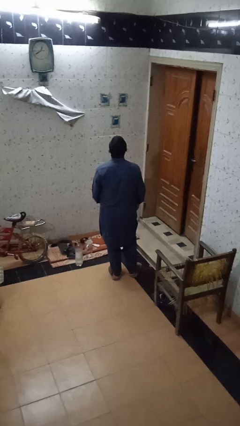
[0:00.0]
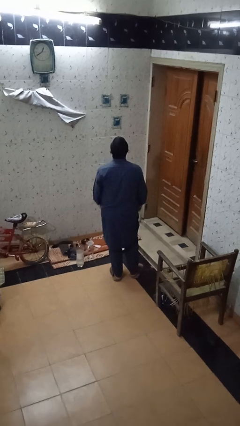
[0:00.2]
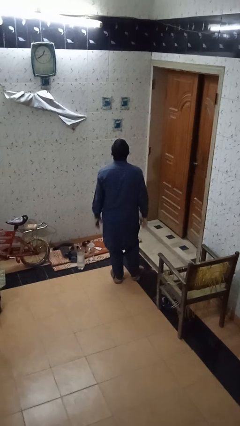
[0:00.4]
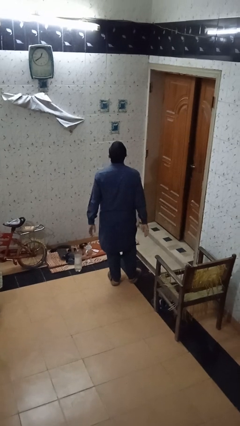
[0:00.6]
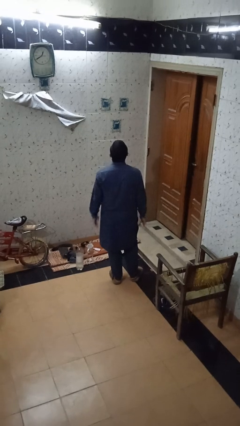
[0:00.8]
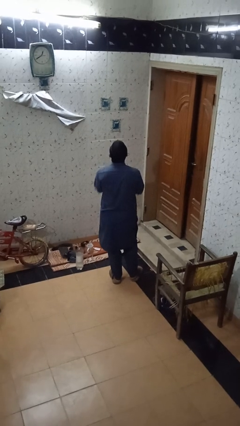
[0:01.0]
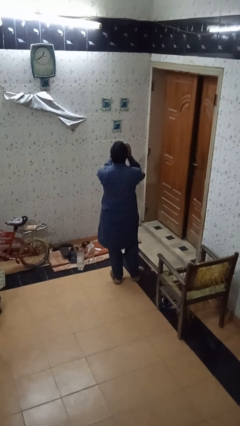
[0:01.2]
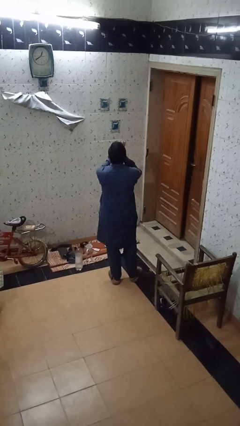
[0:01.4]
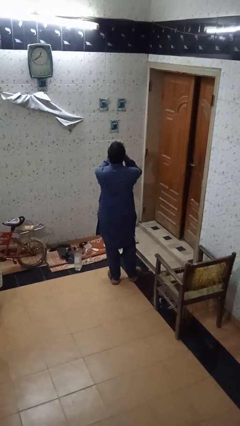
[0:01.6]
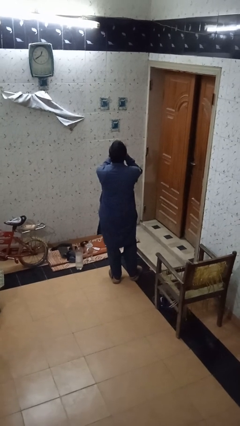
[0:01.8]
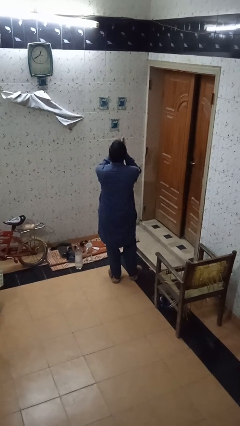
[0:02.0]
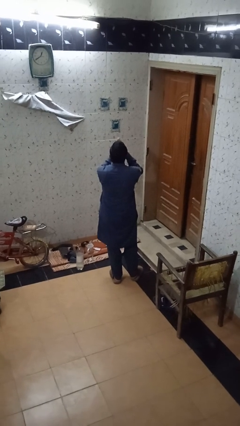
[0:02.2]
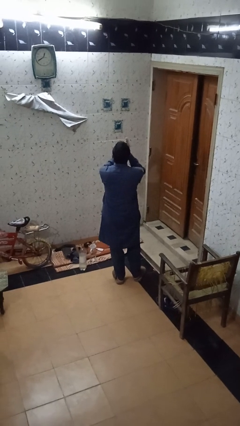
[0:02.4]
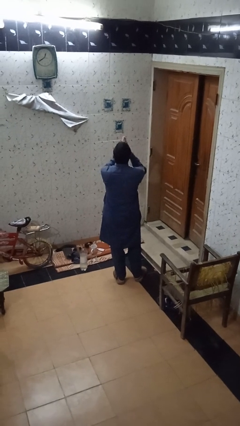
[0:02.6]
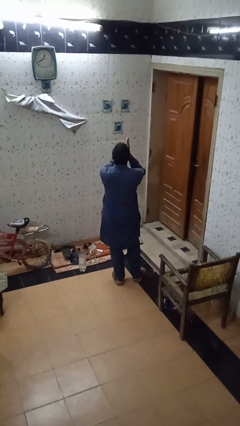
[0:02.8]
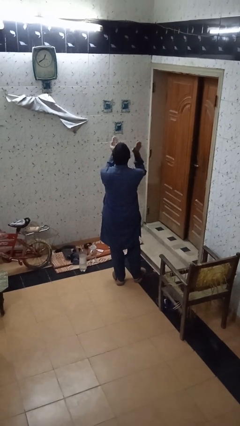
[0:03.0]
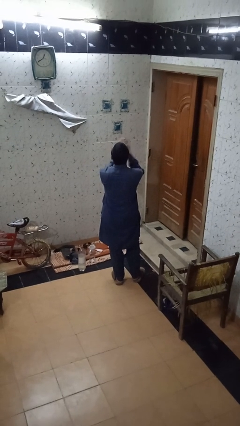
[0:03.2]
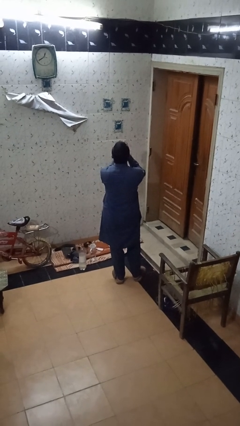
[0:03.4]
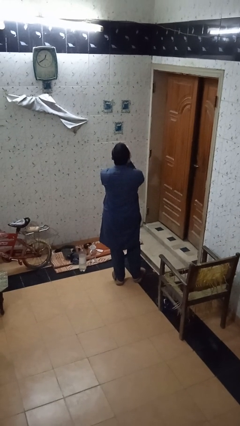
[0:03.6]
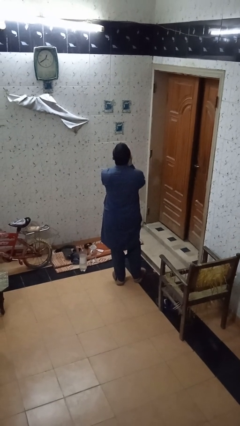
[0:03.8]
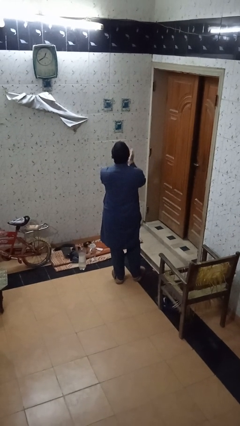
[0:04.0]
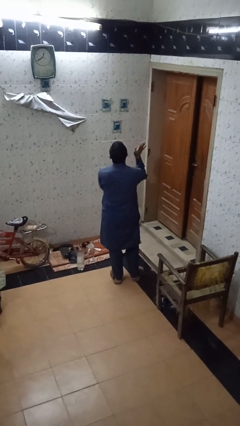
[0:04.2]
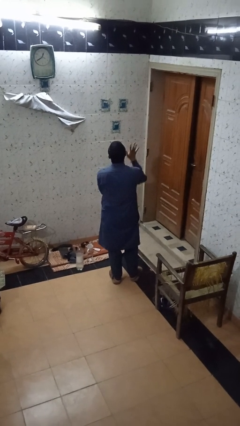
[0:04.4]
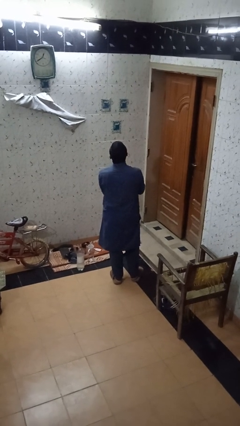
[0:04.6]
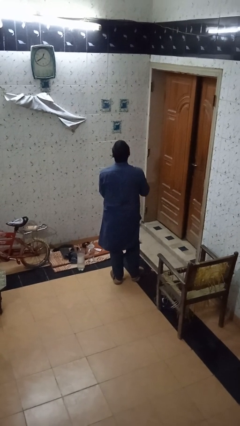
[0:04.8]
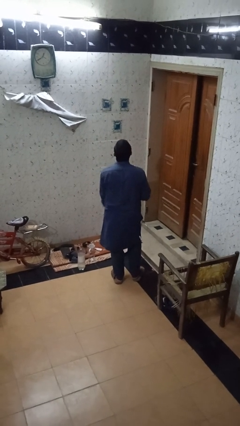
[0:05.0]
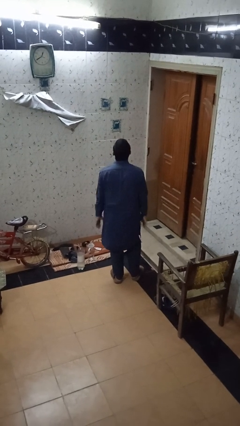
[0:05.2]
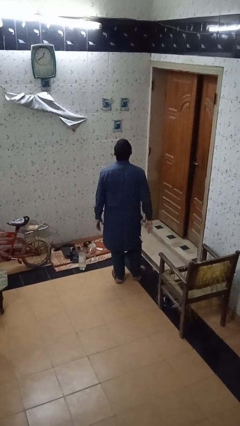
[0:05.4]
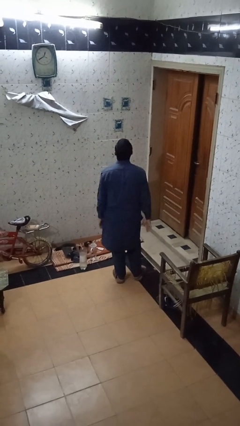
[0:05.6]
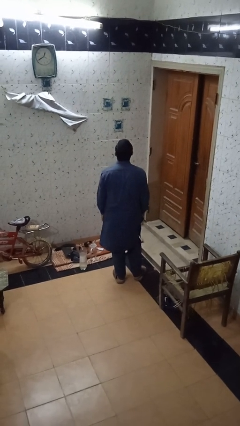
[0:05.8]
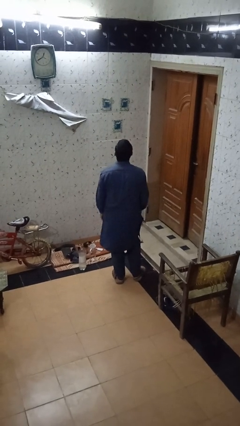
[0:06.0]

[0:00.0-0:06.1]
person claps hands

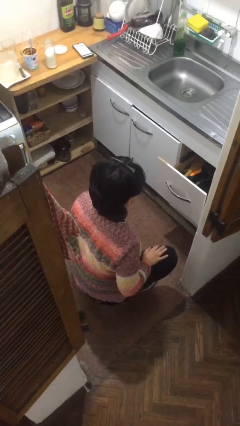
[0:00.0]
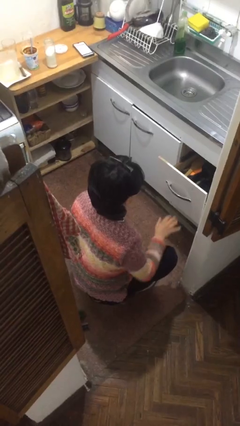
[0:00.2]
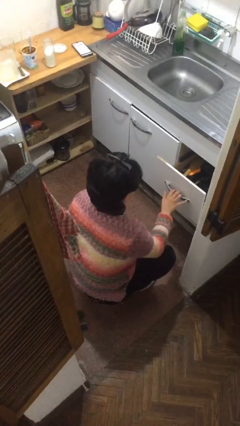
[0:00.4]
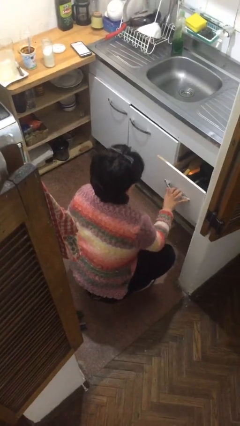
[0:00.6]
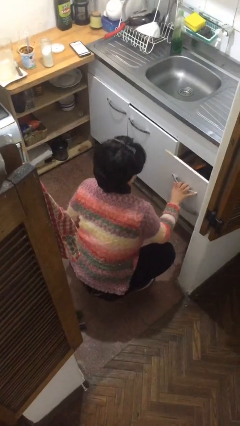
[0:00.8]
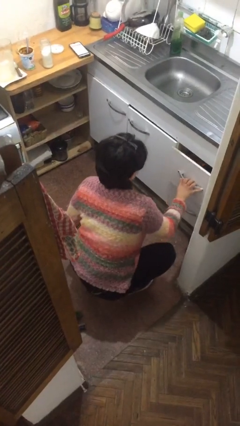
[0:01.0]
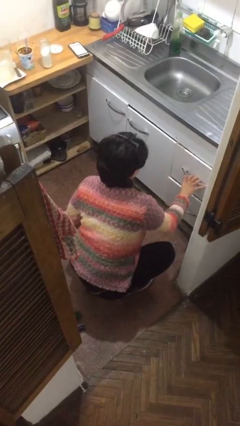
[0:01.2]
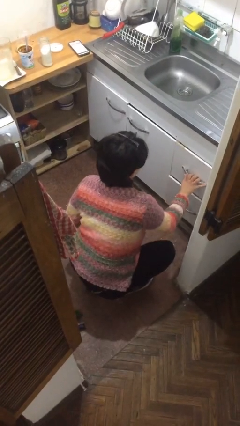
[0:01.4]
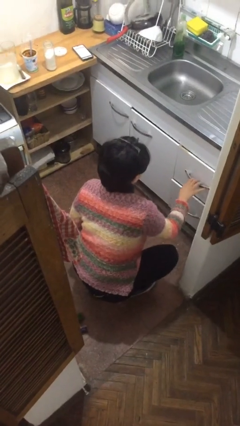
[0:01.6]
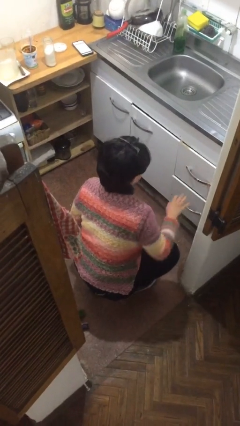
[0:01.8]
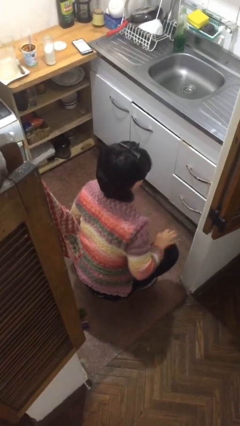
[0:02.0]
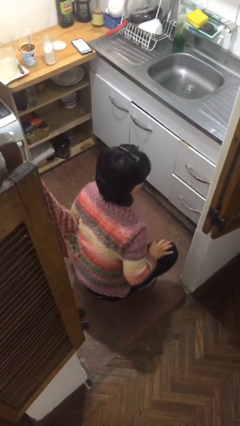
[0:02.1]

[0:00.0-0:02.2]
person closes kitchen drawer

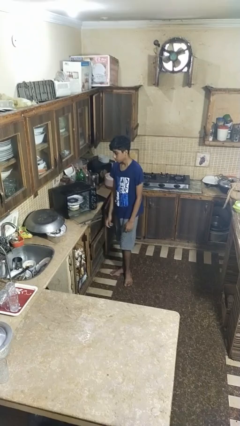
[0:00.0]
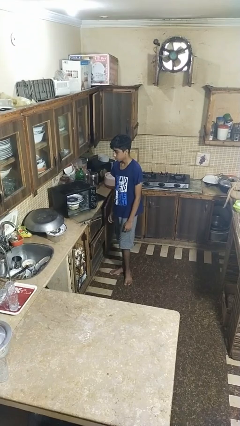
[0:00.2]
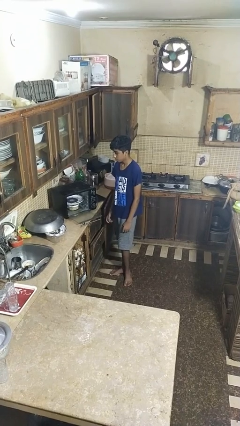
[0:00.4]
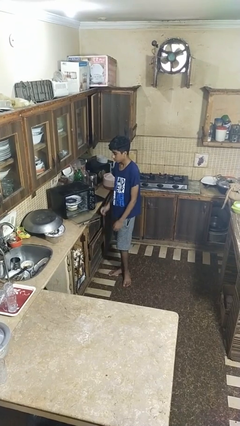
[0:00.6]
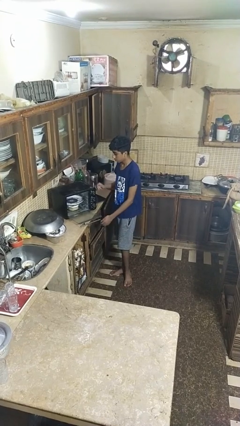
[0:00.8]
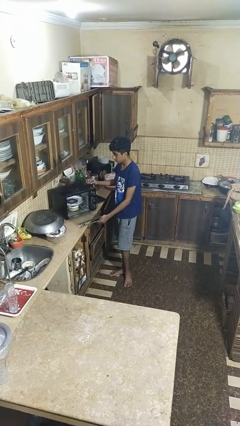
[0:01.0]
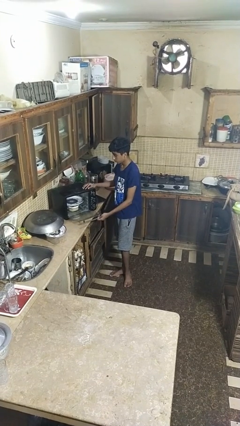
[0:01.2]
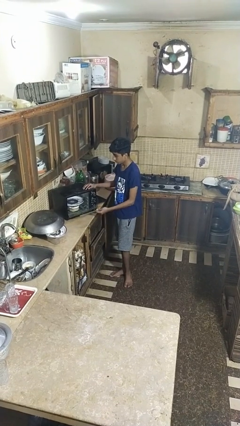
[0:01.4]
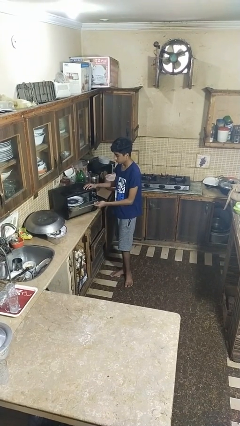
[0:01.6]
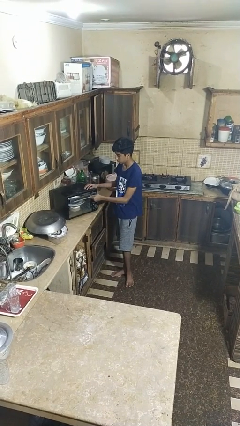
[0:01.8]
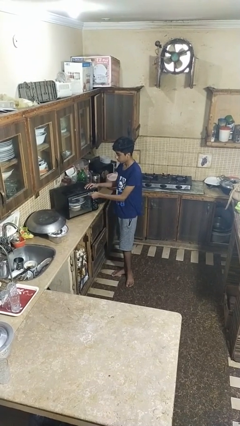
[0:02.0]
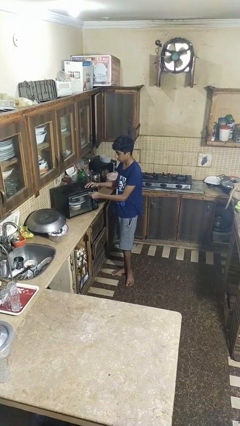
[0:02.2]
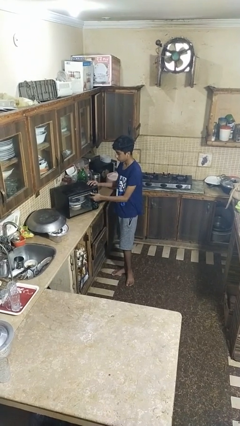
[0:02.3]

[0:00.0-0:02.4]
person closes dishwasher

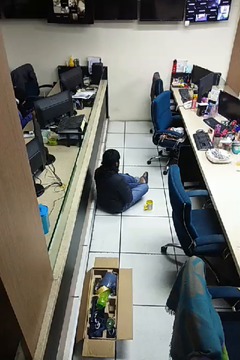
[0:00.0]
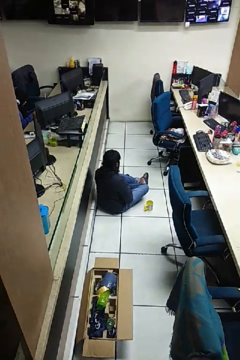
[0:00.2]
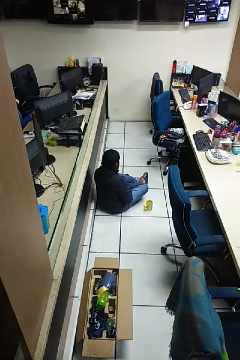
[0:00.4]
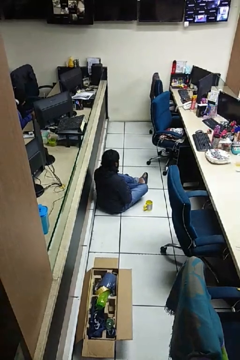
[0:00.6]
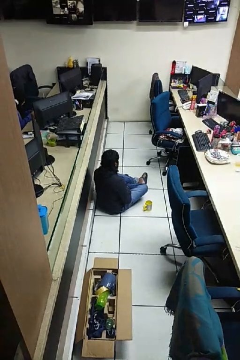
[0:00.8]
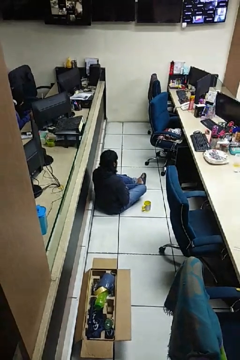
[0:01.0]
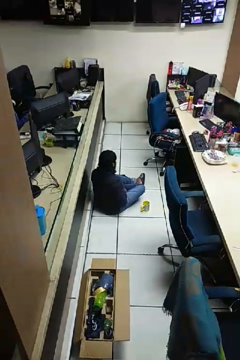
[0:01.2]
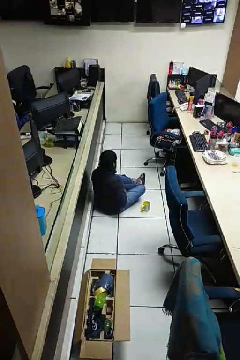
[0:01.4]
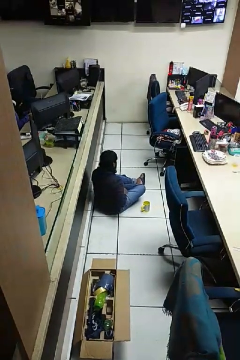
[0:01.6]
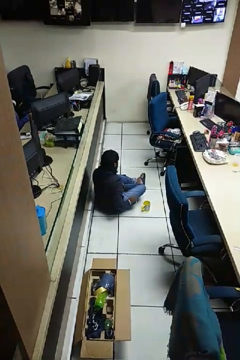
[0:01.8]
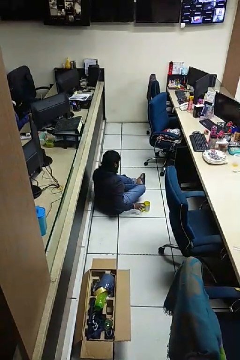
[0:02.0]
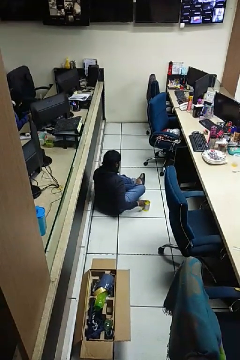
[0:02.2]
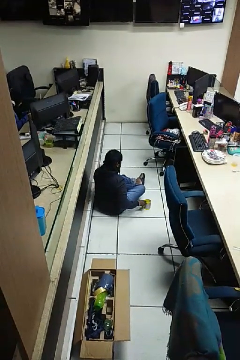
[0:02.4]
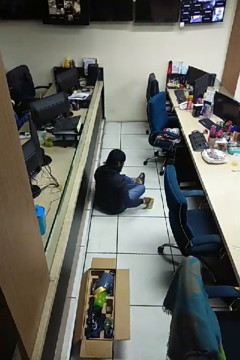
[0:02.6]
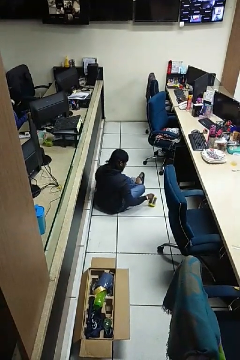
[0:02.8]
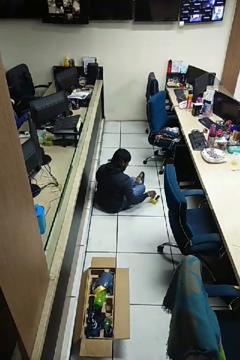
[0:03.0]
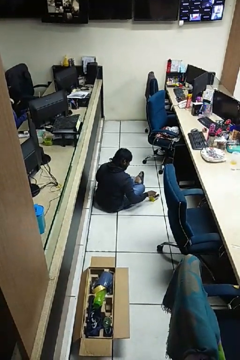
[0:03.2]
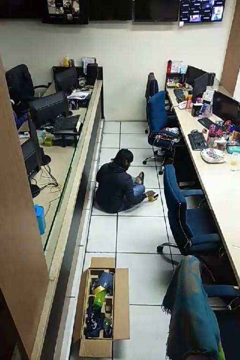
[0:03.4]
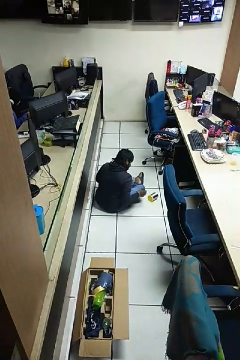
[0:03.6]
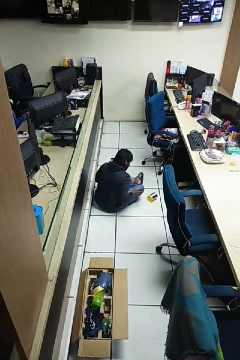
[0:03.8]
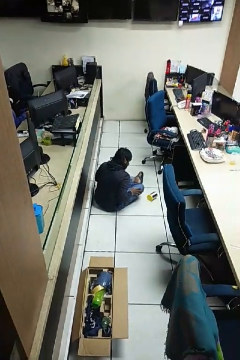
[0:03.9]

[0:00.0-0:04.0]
person spills on floor

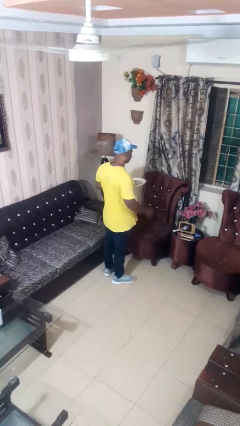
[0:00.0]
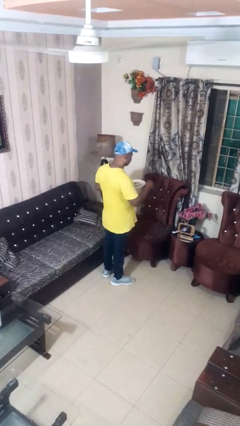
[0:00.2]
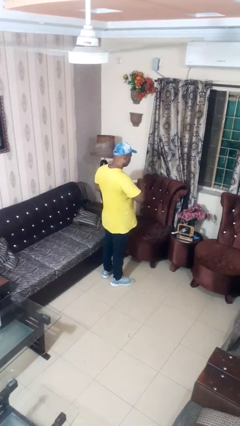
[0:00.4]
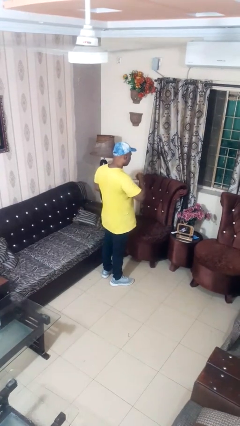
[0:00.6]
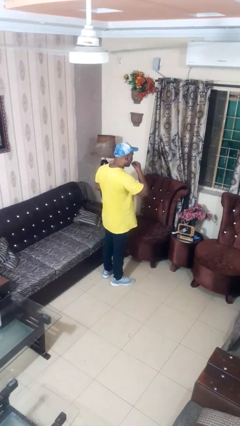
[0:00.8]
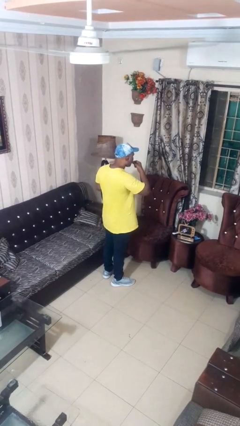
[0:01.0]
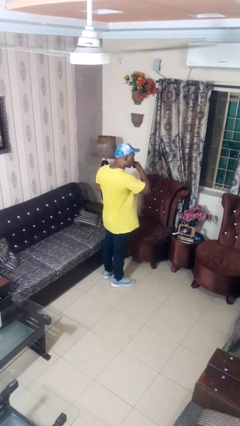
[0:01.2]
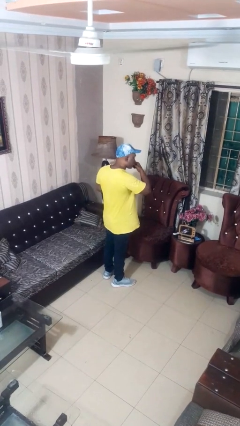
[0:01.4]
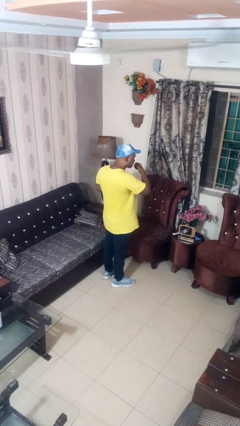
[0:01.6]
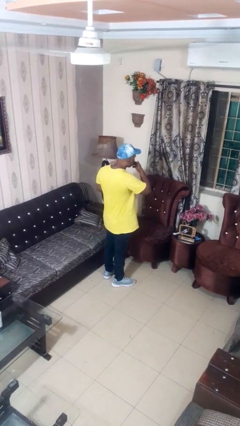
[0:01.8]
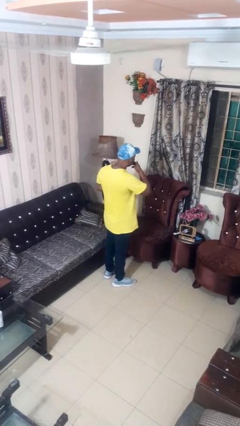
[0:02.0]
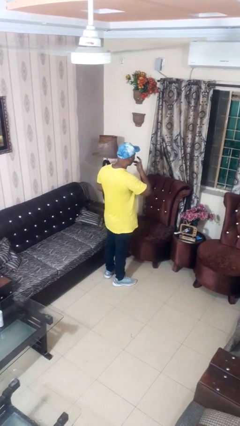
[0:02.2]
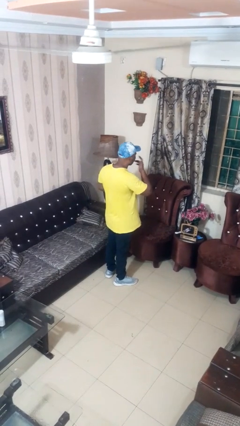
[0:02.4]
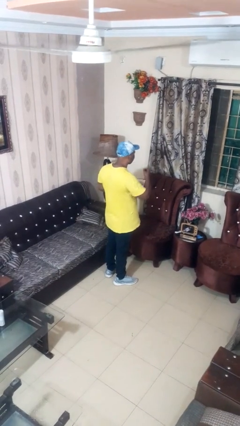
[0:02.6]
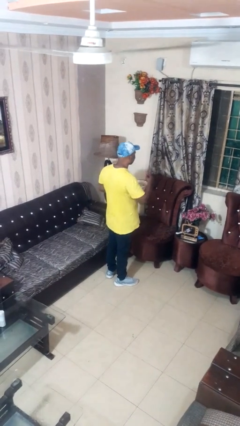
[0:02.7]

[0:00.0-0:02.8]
person licks fingers

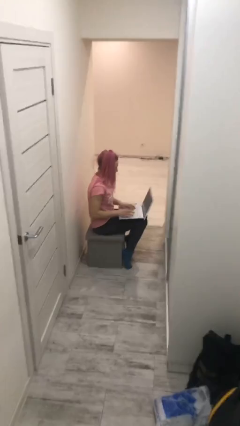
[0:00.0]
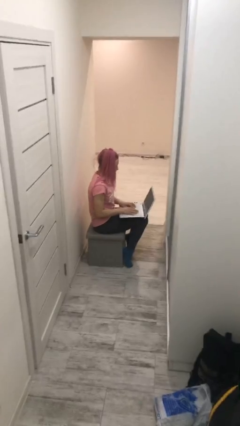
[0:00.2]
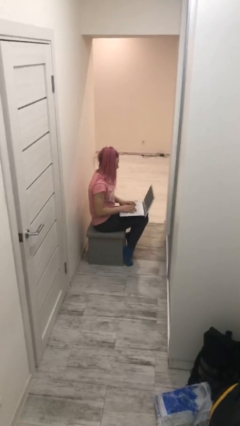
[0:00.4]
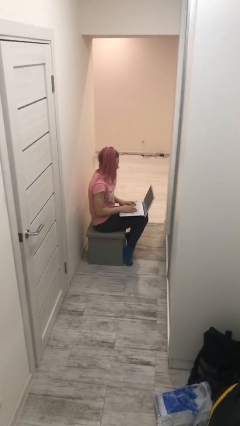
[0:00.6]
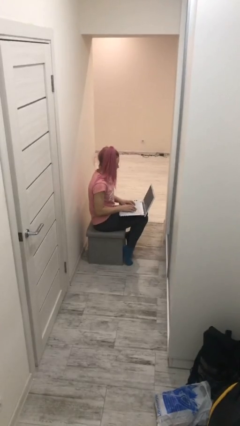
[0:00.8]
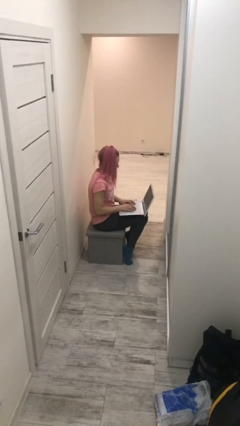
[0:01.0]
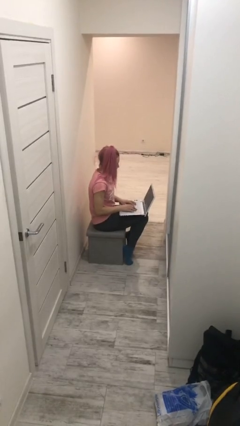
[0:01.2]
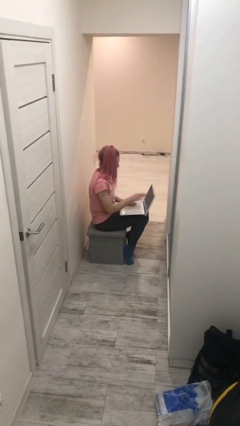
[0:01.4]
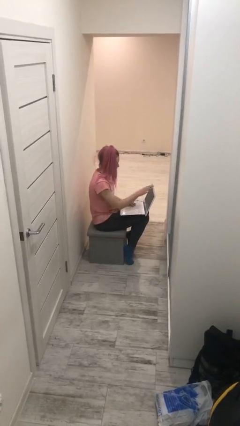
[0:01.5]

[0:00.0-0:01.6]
person interacts with laptop
